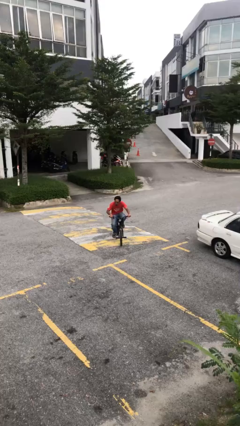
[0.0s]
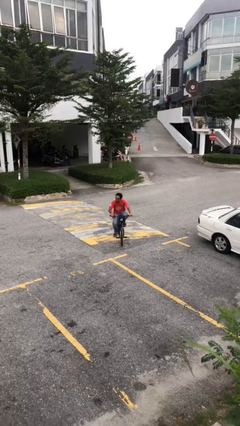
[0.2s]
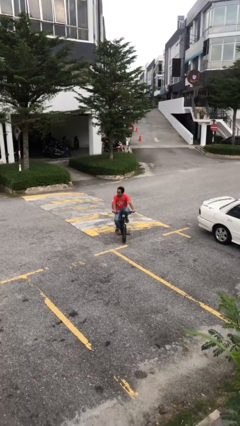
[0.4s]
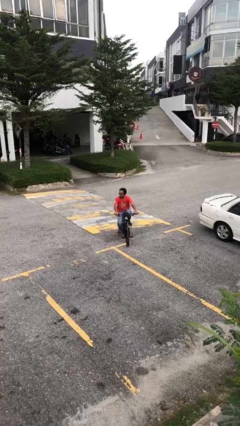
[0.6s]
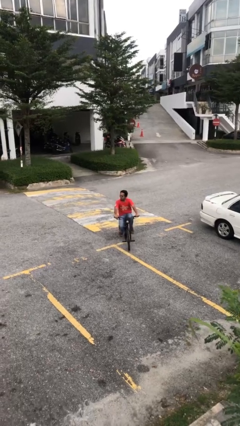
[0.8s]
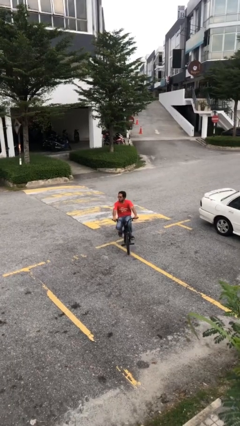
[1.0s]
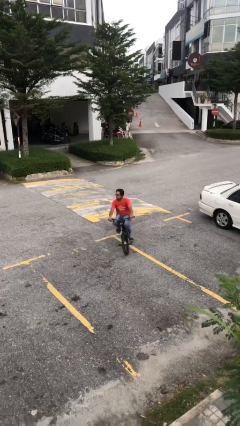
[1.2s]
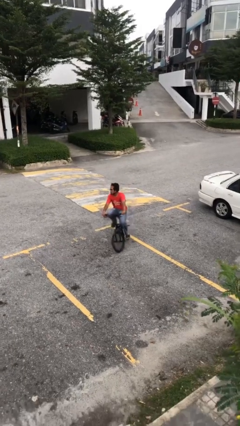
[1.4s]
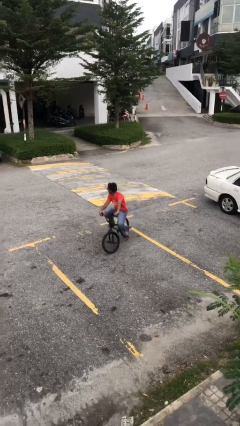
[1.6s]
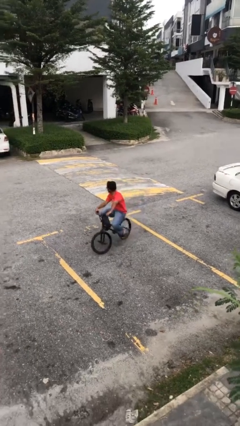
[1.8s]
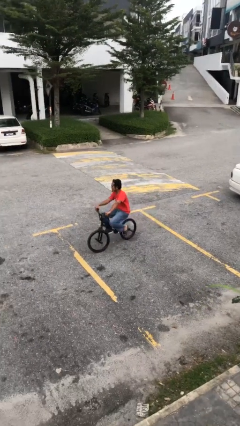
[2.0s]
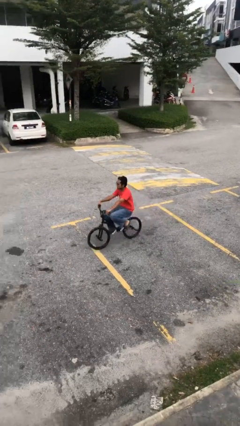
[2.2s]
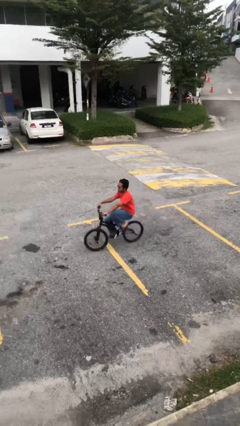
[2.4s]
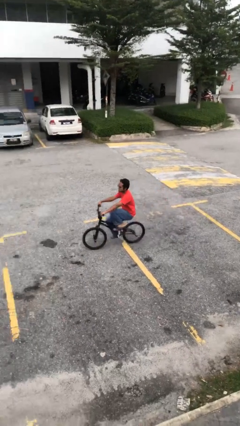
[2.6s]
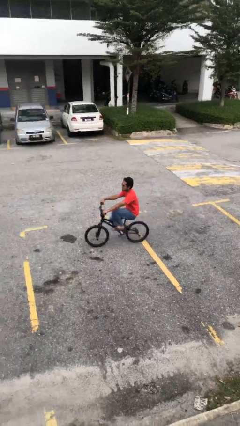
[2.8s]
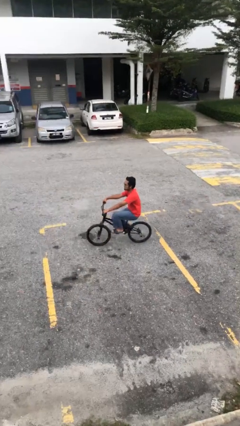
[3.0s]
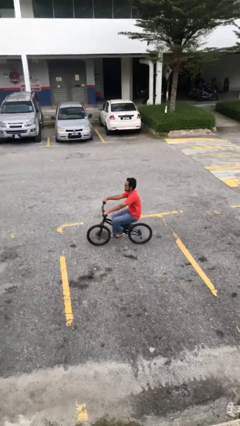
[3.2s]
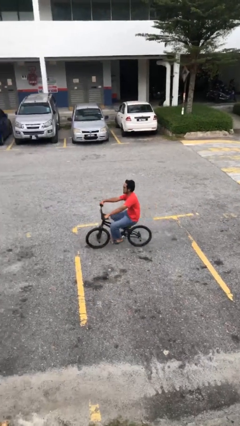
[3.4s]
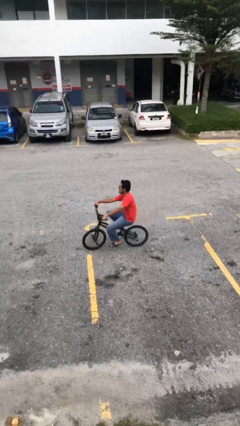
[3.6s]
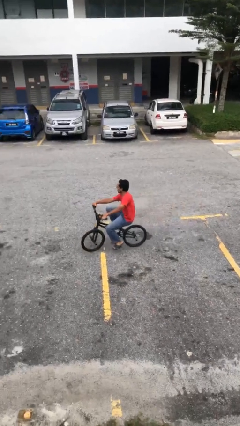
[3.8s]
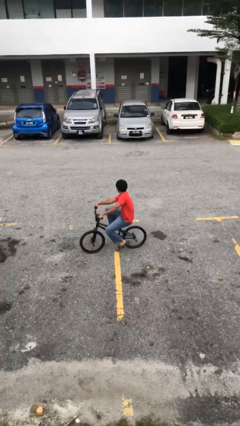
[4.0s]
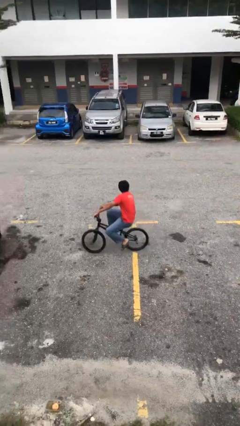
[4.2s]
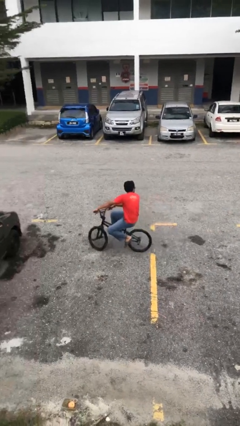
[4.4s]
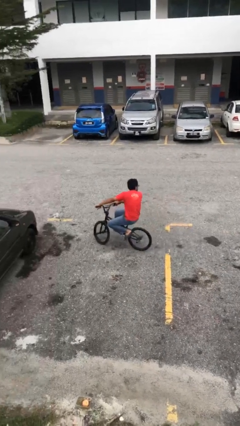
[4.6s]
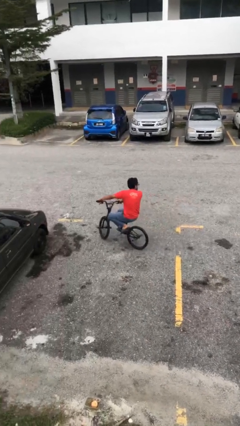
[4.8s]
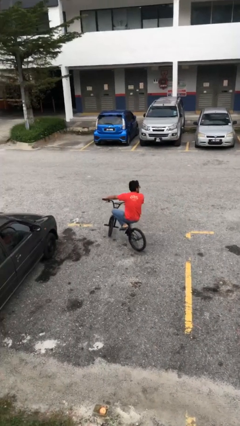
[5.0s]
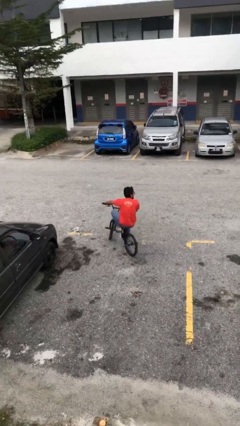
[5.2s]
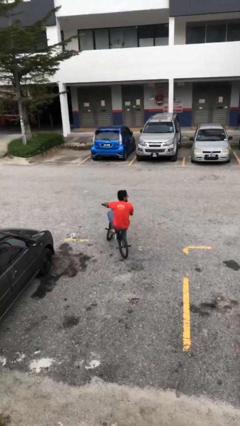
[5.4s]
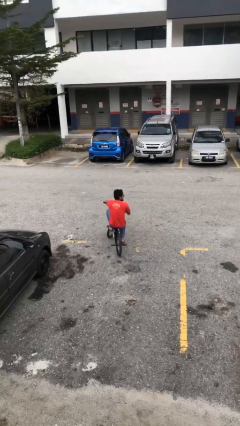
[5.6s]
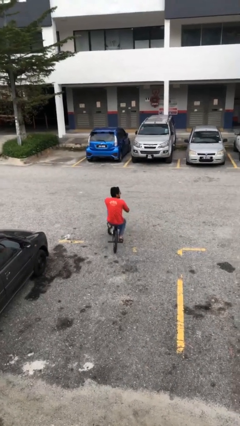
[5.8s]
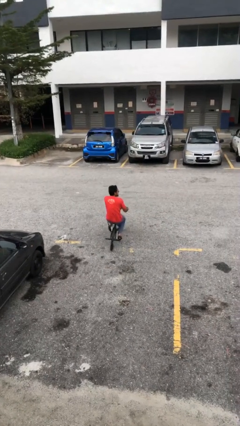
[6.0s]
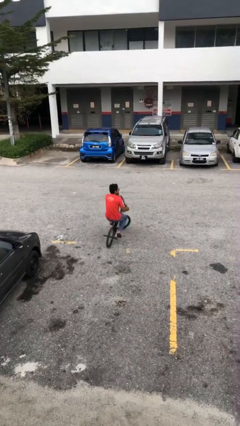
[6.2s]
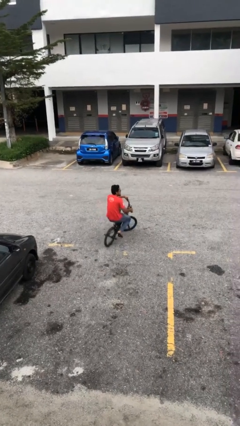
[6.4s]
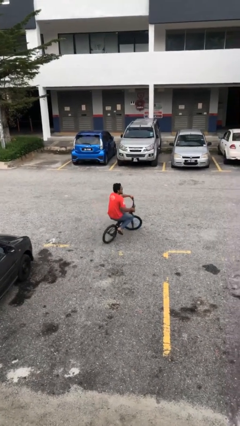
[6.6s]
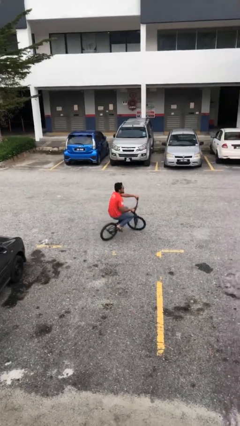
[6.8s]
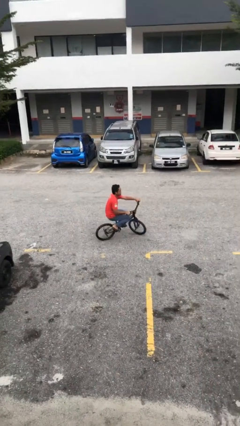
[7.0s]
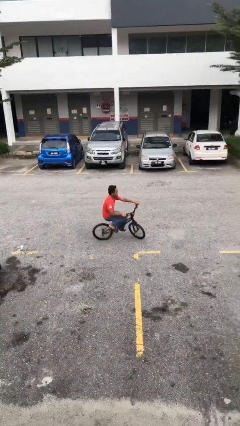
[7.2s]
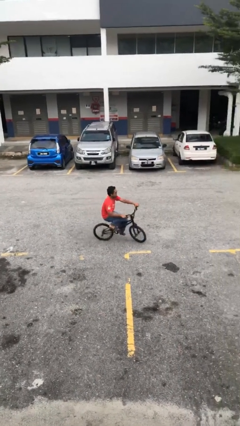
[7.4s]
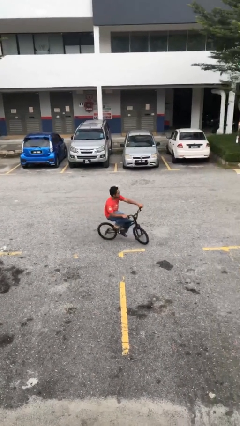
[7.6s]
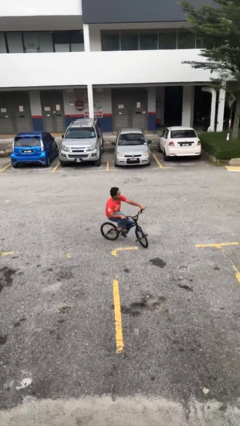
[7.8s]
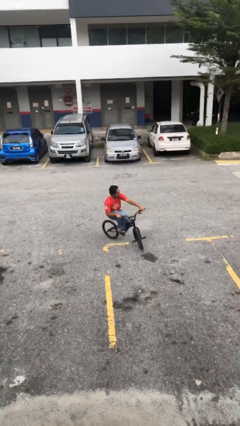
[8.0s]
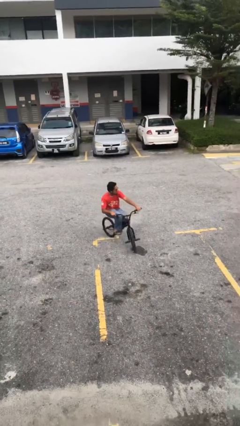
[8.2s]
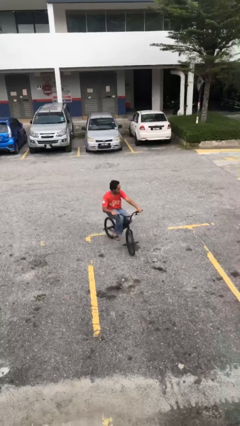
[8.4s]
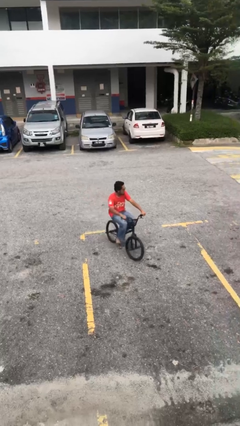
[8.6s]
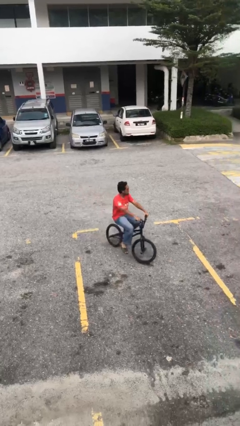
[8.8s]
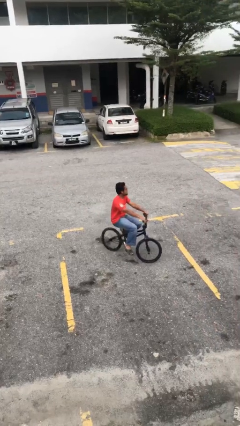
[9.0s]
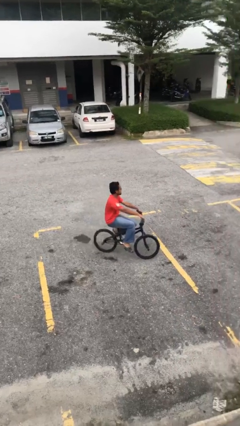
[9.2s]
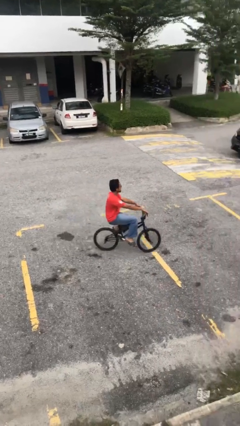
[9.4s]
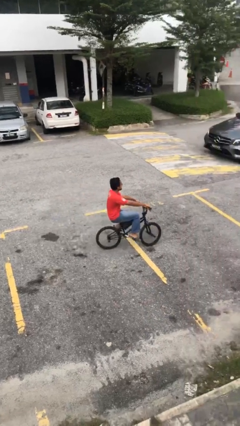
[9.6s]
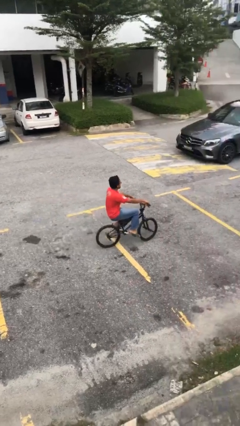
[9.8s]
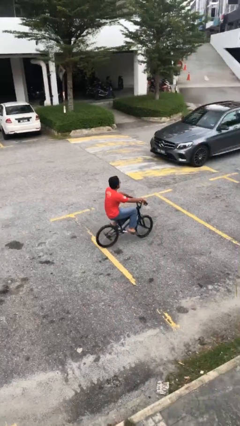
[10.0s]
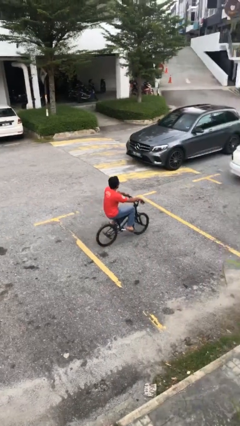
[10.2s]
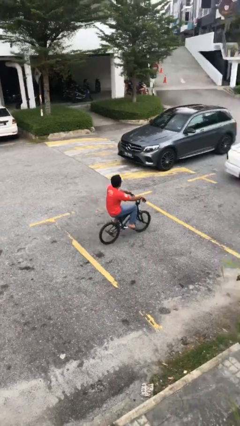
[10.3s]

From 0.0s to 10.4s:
person rides bicycle

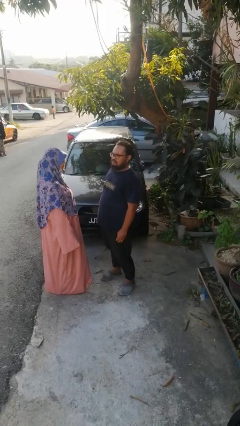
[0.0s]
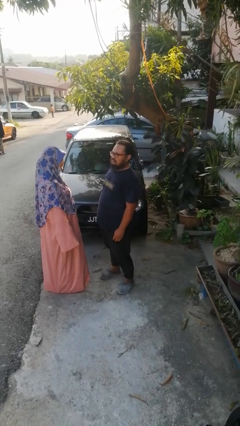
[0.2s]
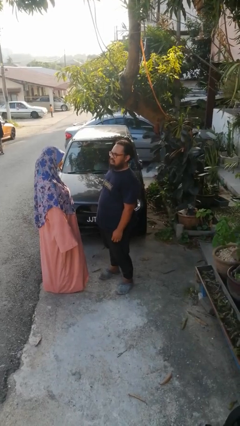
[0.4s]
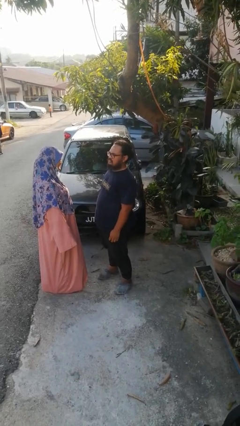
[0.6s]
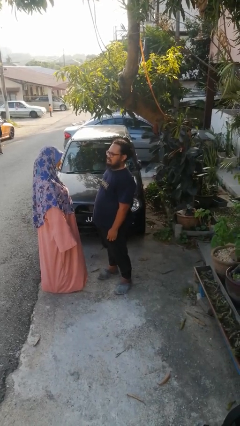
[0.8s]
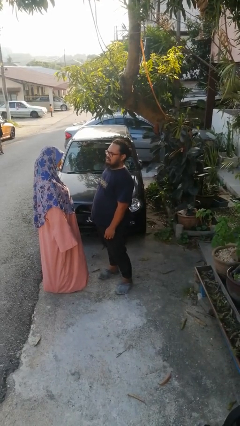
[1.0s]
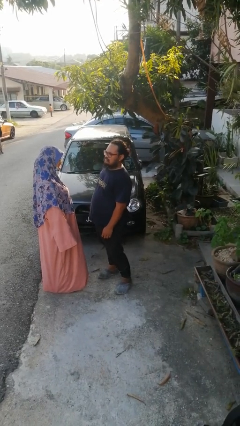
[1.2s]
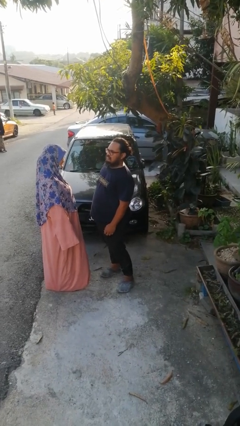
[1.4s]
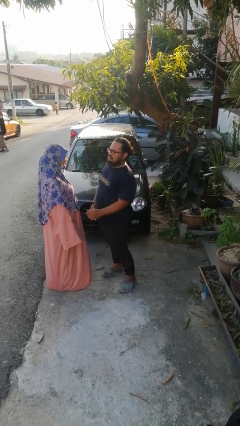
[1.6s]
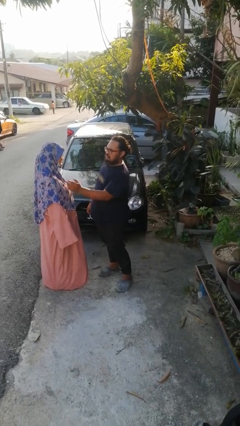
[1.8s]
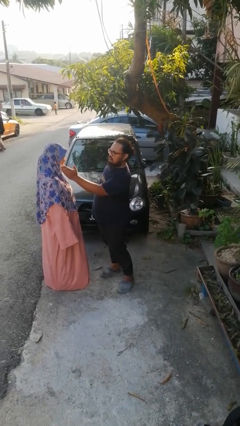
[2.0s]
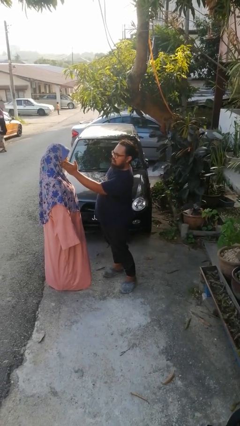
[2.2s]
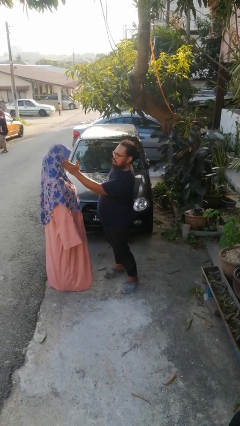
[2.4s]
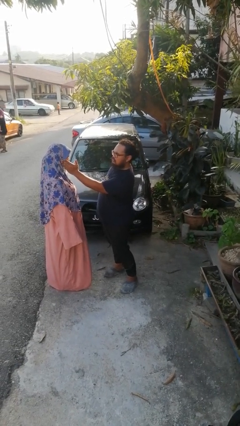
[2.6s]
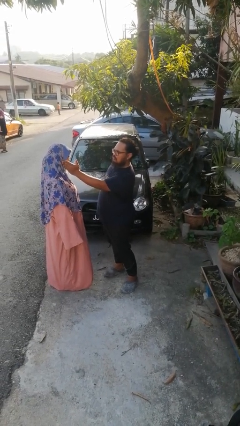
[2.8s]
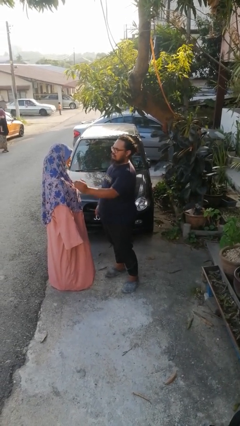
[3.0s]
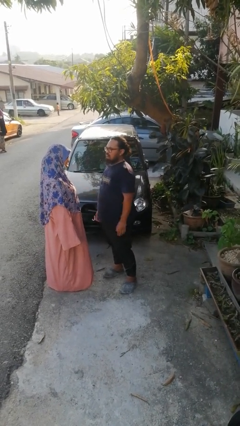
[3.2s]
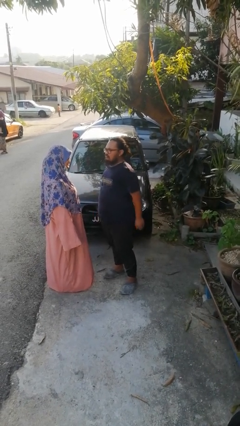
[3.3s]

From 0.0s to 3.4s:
person touches face of person

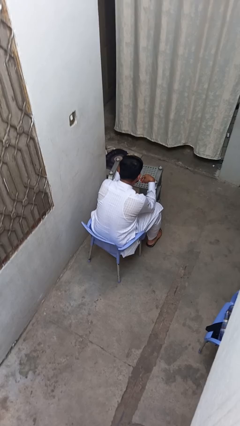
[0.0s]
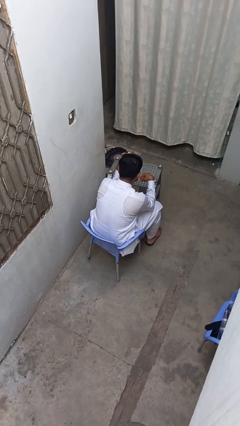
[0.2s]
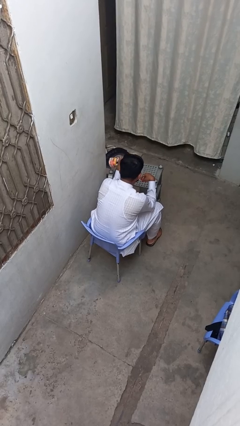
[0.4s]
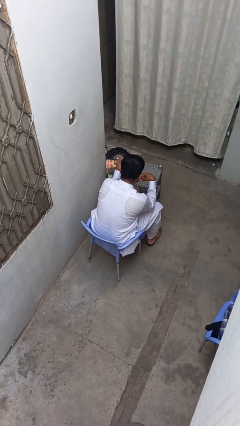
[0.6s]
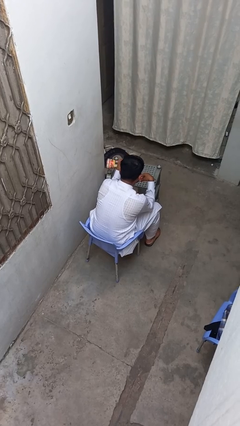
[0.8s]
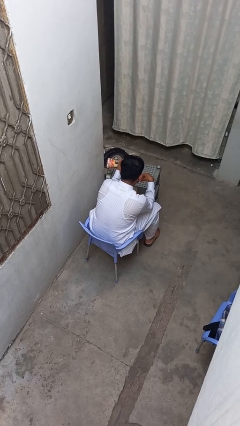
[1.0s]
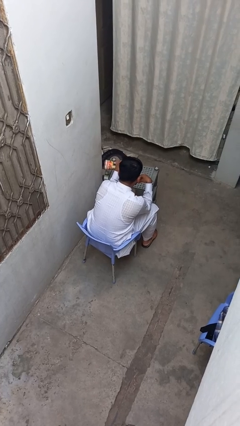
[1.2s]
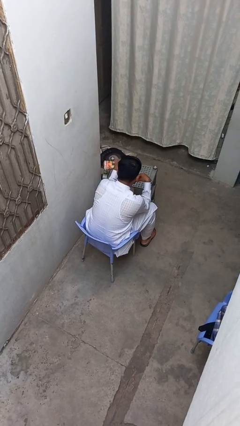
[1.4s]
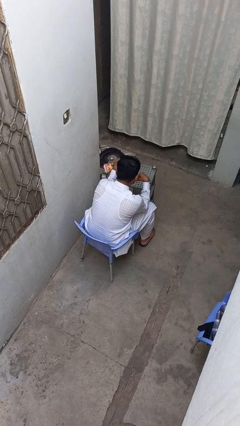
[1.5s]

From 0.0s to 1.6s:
person pours liquid into cup

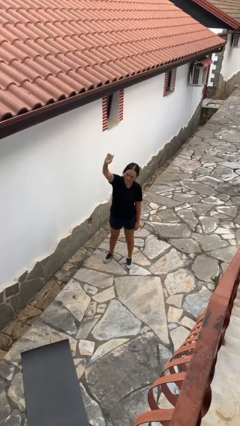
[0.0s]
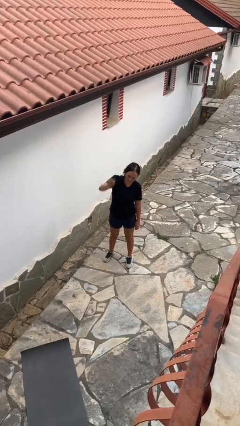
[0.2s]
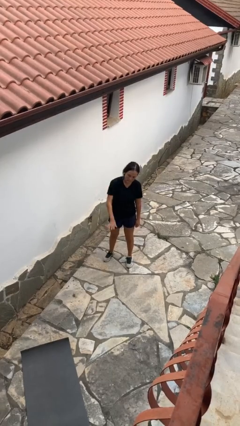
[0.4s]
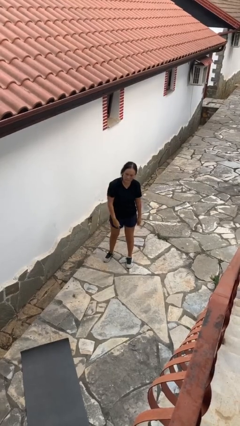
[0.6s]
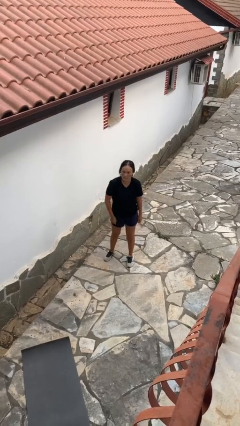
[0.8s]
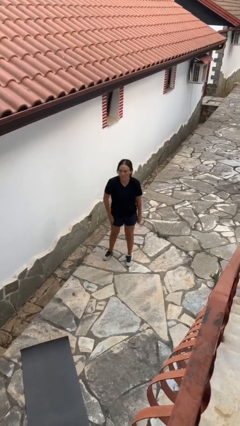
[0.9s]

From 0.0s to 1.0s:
person gestures swipe down

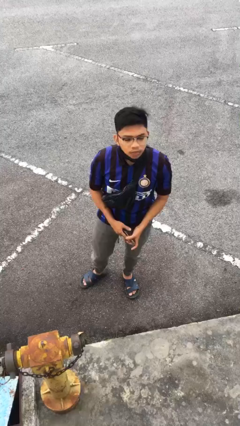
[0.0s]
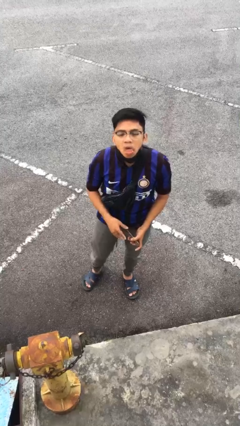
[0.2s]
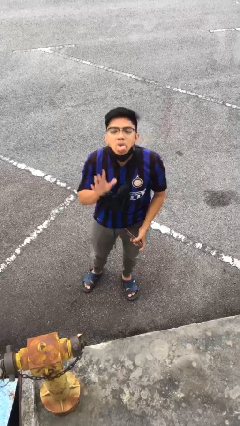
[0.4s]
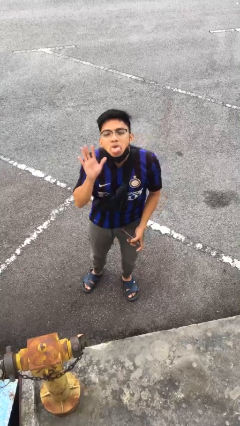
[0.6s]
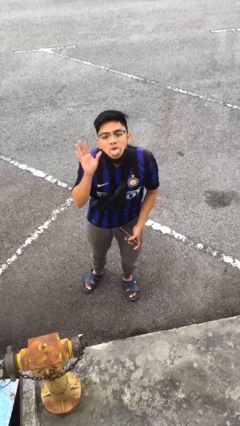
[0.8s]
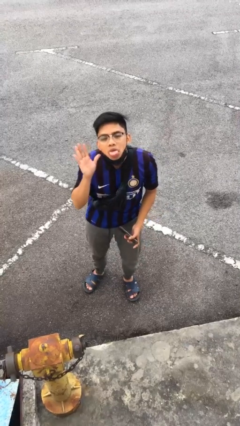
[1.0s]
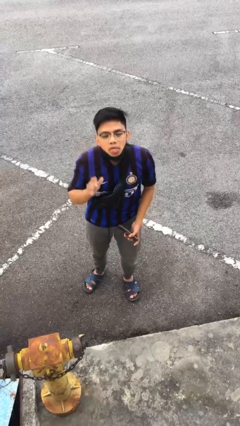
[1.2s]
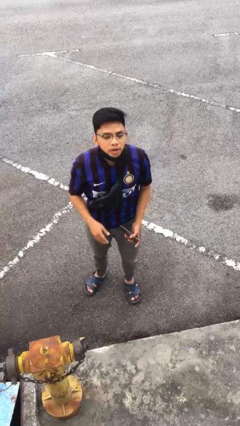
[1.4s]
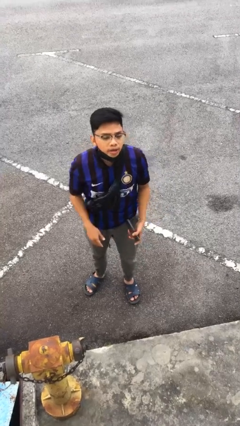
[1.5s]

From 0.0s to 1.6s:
person sticks out tongue
